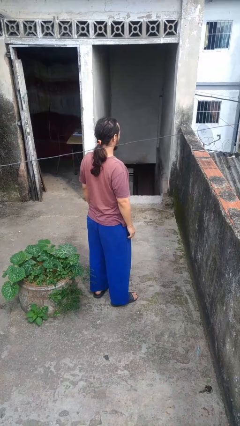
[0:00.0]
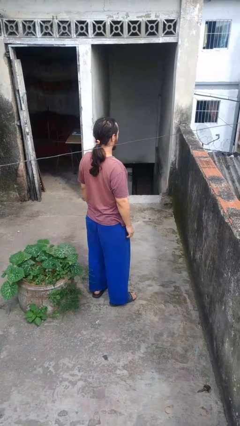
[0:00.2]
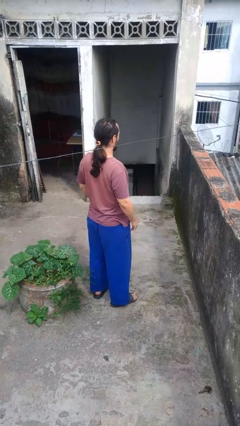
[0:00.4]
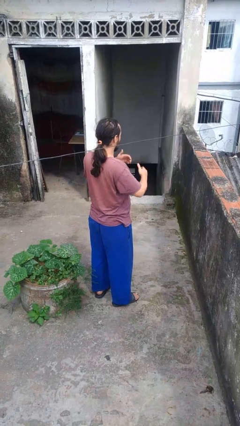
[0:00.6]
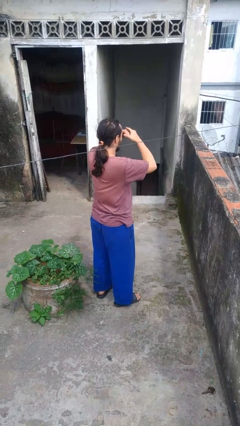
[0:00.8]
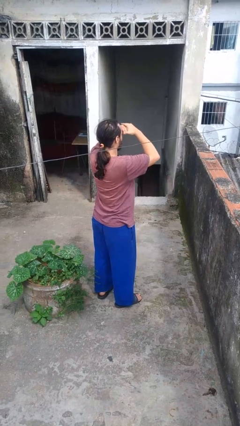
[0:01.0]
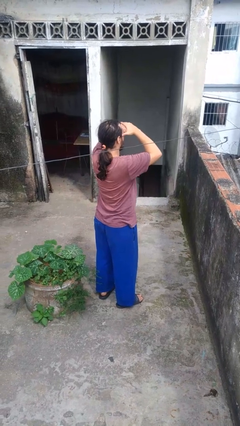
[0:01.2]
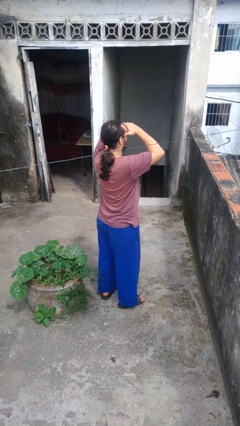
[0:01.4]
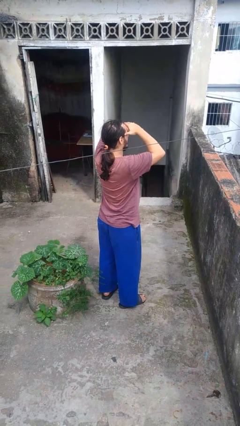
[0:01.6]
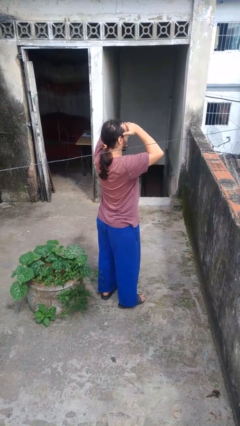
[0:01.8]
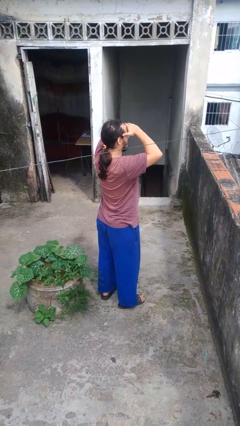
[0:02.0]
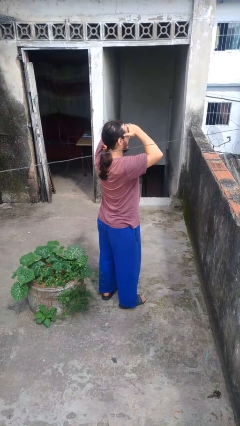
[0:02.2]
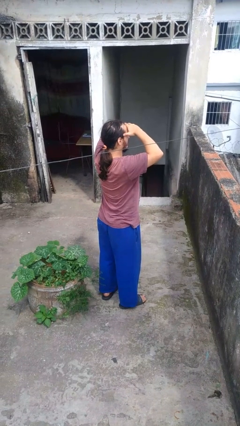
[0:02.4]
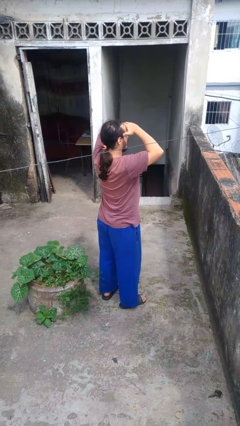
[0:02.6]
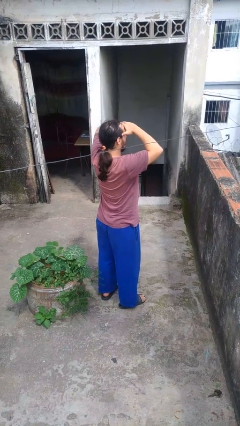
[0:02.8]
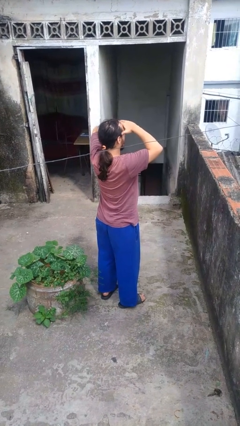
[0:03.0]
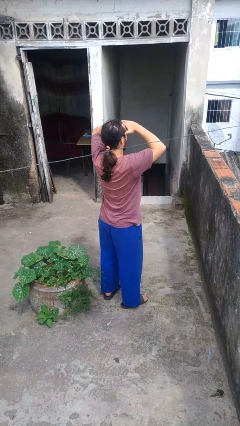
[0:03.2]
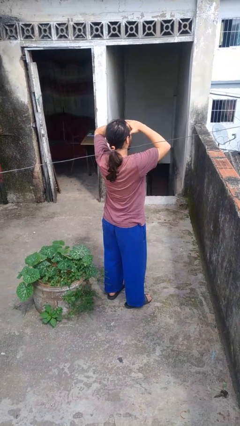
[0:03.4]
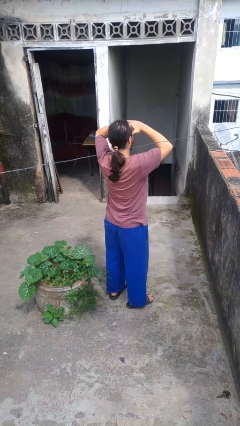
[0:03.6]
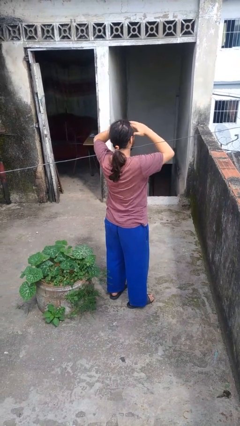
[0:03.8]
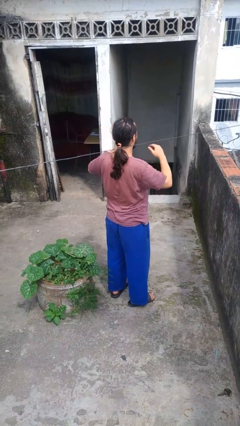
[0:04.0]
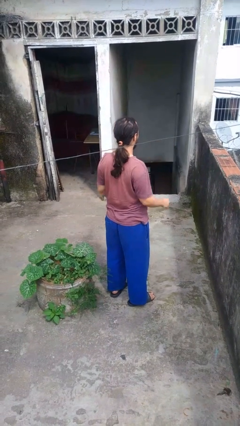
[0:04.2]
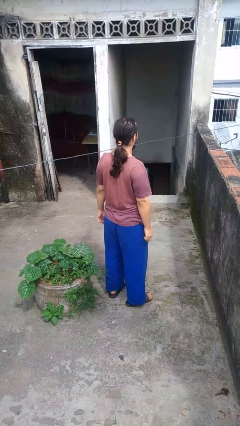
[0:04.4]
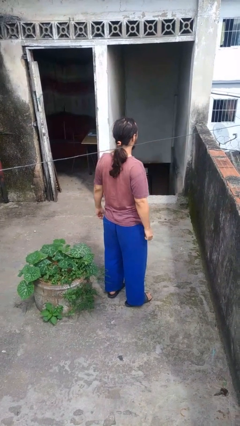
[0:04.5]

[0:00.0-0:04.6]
person shades eyes

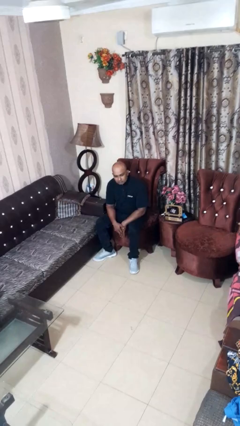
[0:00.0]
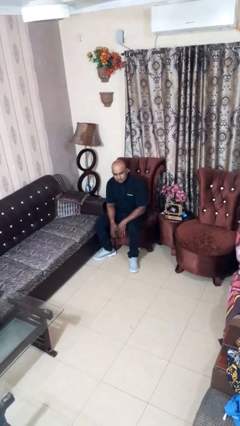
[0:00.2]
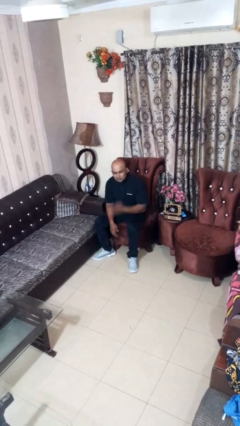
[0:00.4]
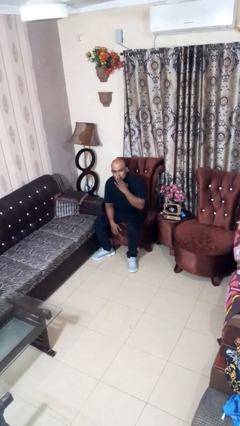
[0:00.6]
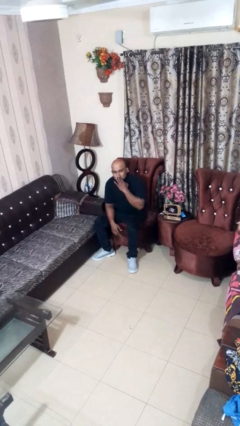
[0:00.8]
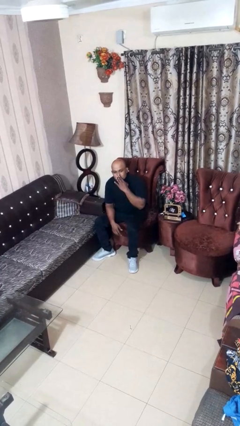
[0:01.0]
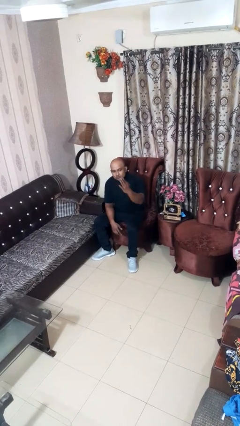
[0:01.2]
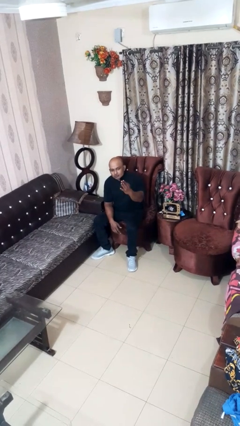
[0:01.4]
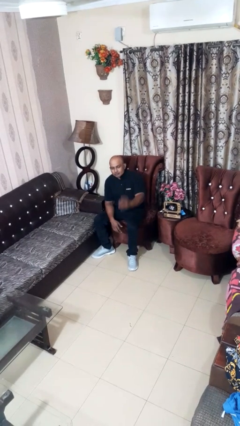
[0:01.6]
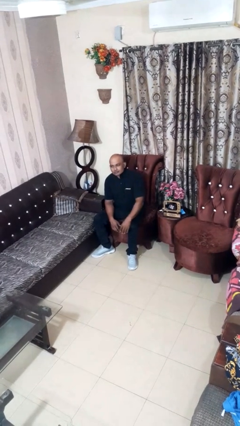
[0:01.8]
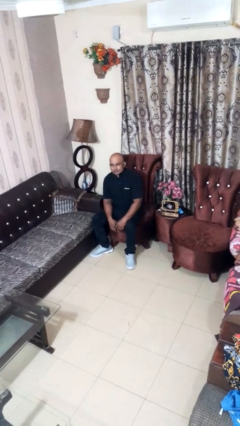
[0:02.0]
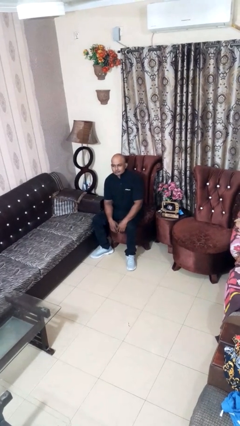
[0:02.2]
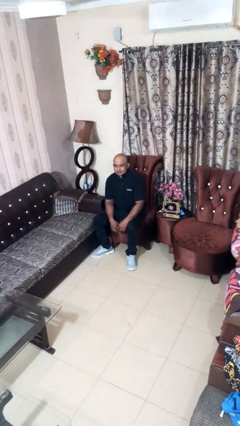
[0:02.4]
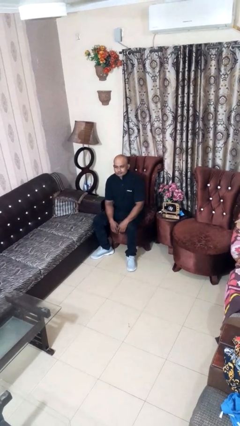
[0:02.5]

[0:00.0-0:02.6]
person gestures blow kiss

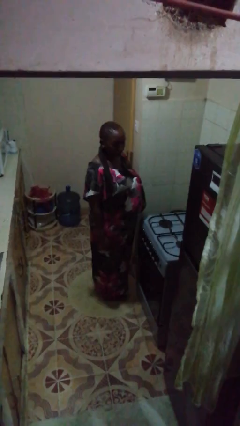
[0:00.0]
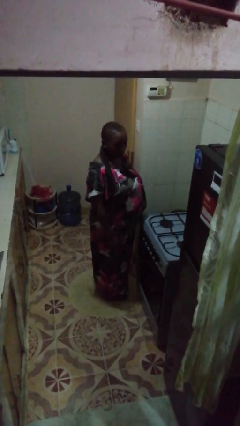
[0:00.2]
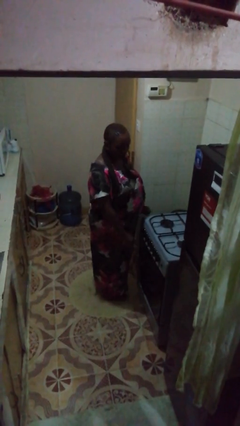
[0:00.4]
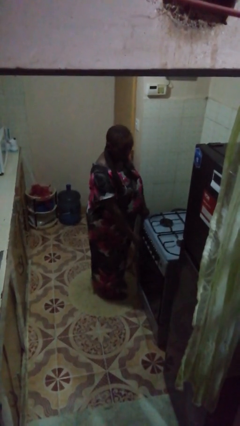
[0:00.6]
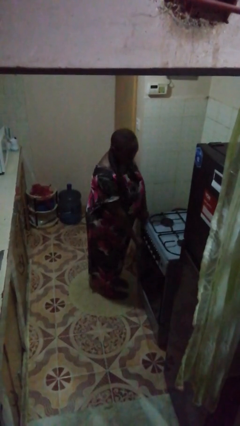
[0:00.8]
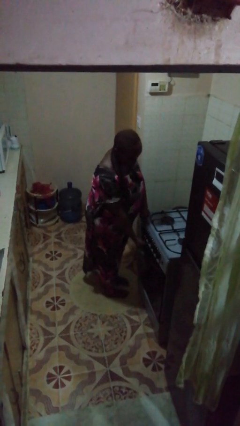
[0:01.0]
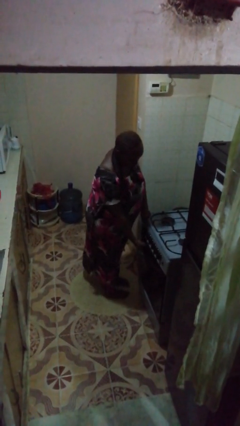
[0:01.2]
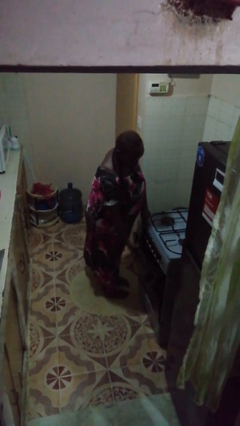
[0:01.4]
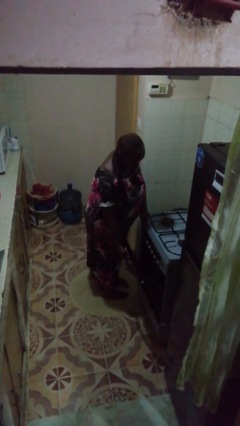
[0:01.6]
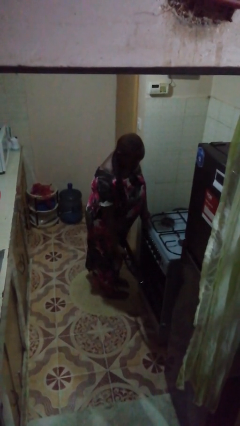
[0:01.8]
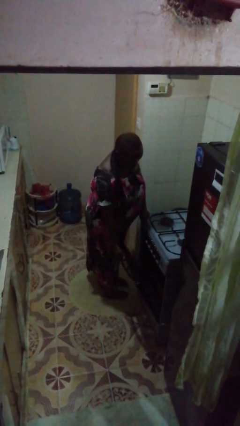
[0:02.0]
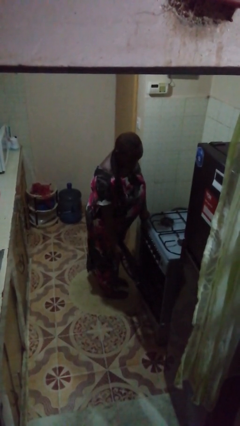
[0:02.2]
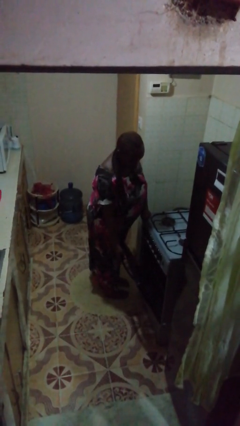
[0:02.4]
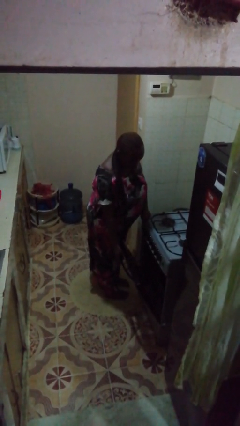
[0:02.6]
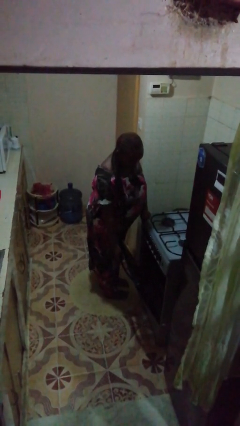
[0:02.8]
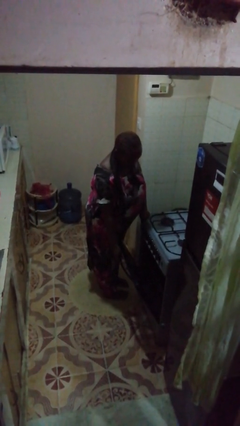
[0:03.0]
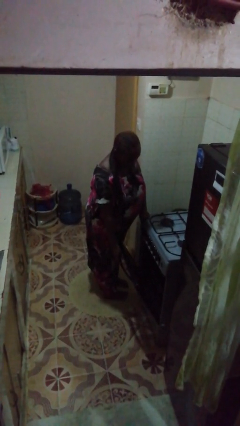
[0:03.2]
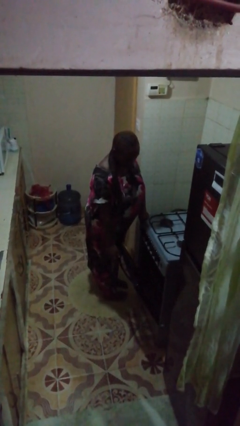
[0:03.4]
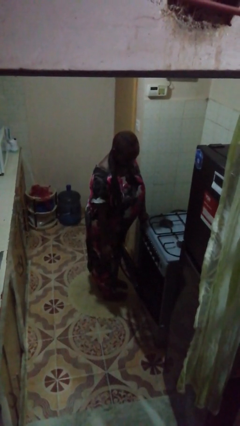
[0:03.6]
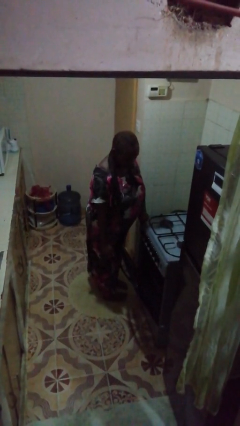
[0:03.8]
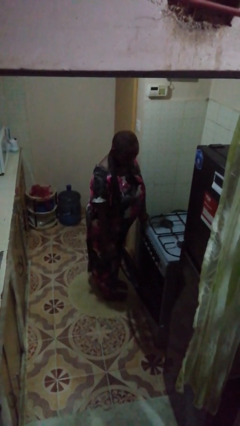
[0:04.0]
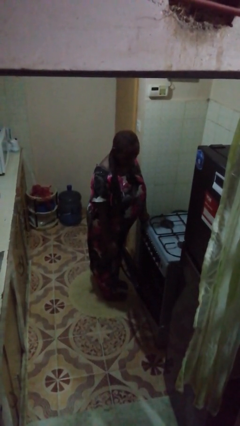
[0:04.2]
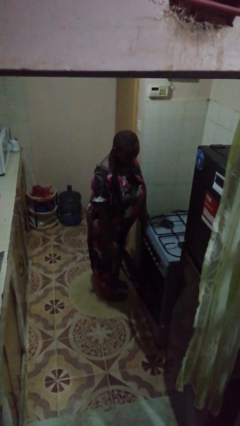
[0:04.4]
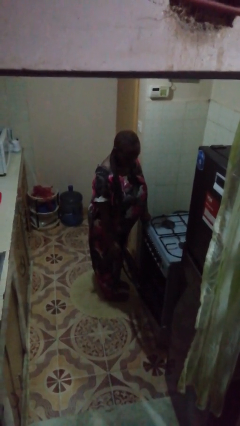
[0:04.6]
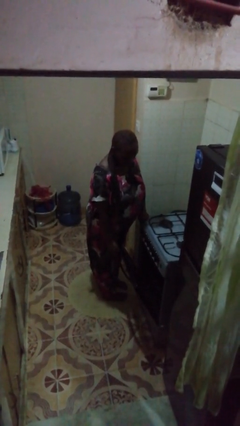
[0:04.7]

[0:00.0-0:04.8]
person opens oven door

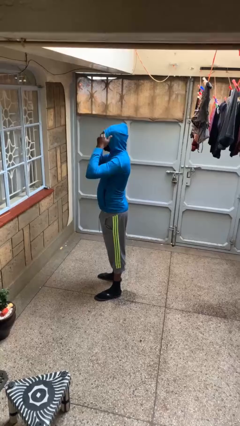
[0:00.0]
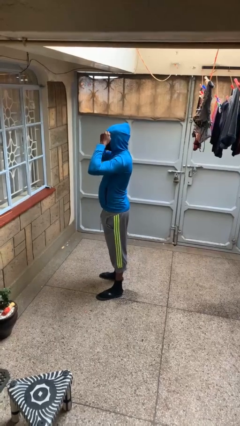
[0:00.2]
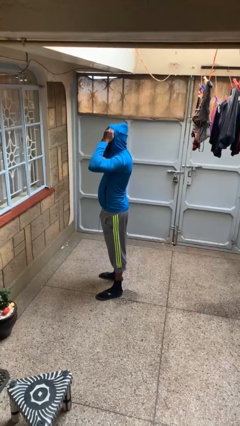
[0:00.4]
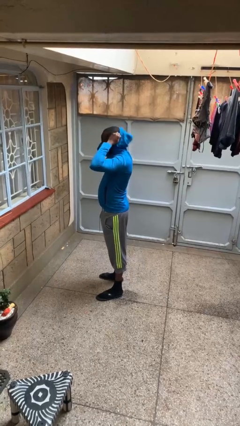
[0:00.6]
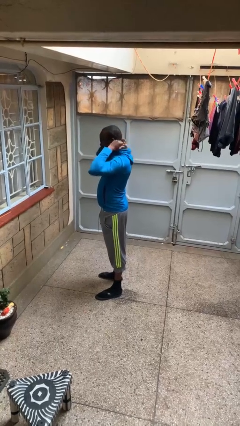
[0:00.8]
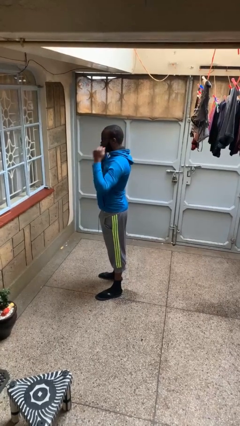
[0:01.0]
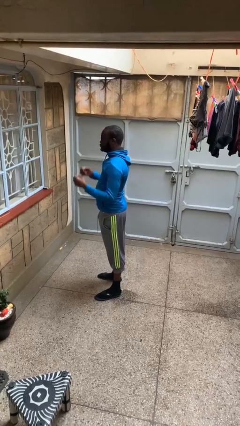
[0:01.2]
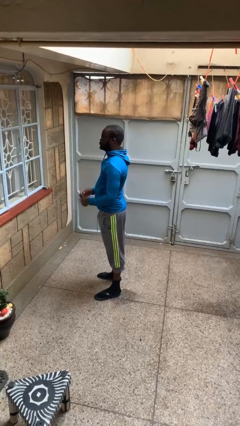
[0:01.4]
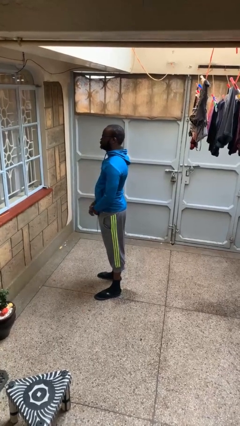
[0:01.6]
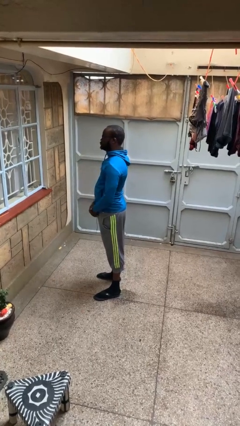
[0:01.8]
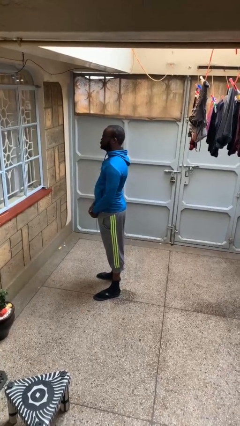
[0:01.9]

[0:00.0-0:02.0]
person takes off hoodie

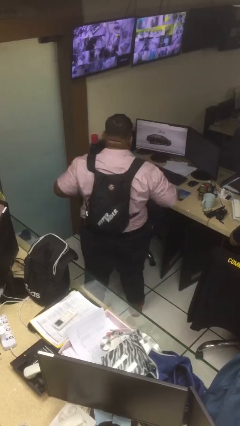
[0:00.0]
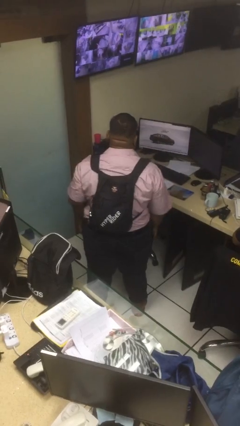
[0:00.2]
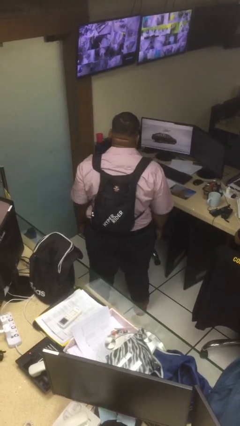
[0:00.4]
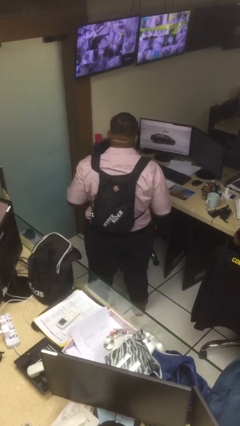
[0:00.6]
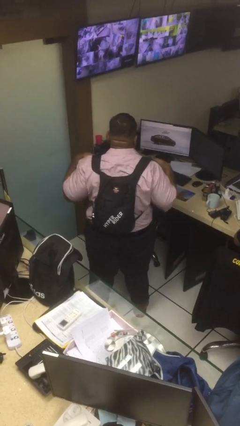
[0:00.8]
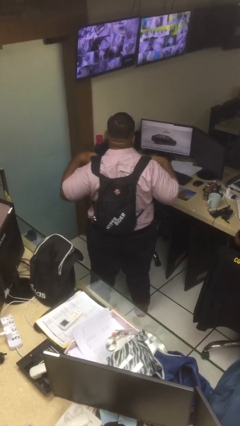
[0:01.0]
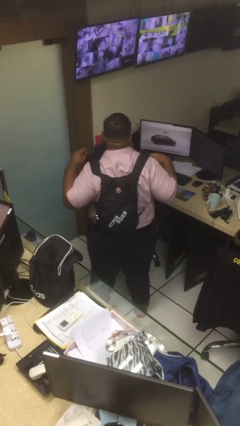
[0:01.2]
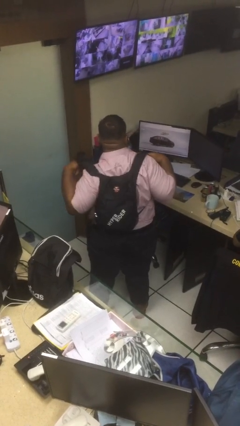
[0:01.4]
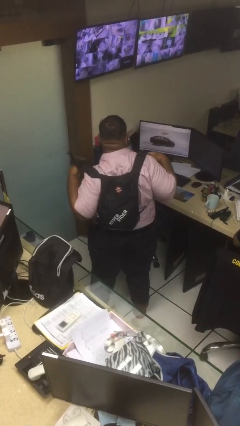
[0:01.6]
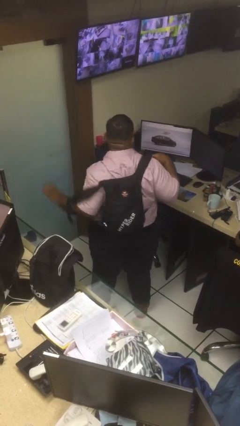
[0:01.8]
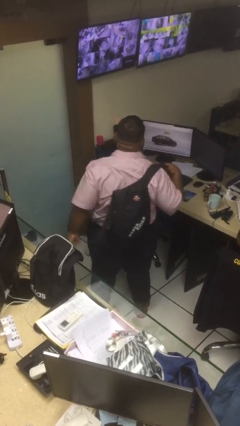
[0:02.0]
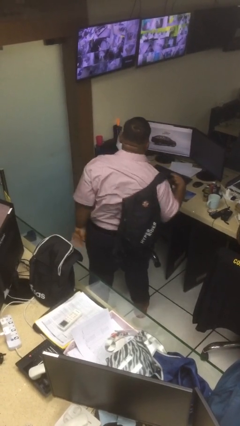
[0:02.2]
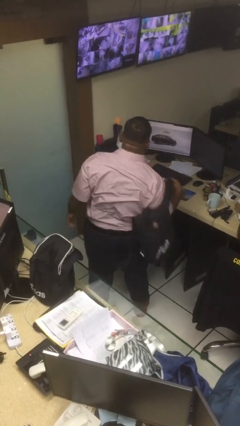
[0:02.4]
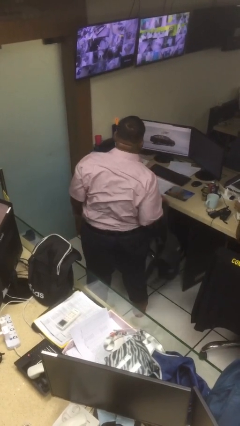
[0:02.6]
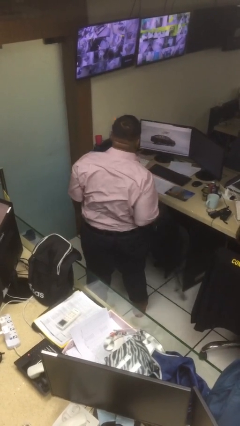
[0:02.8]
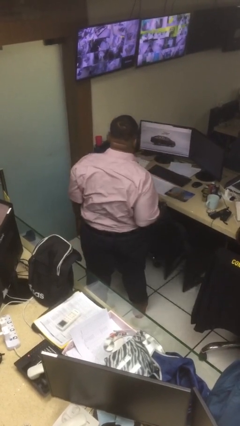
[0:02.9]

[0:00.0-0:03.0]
person takes off backpack

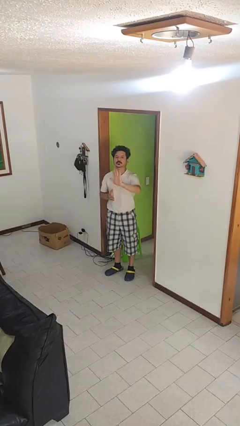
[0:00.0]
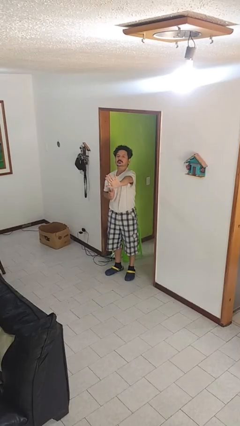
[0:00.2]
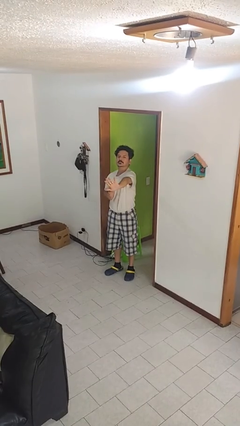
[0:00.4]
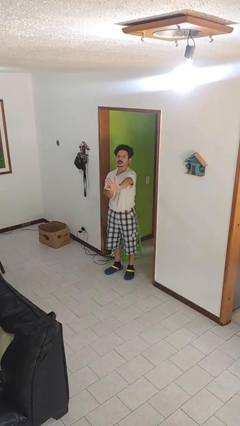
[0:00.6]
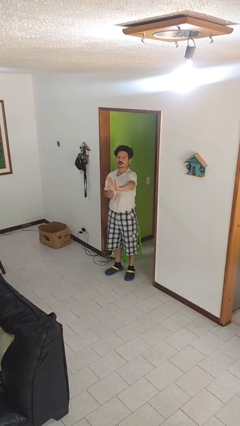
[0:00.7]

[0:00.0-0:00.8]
person gestures stop
